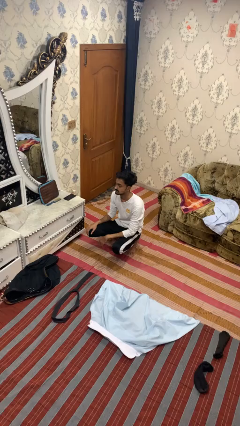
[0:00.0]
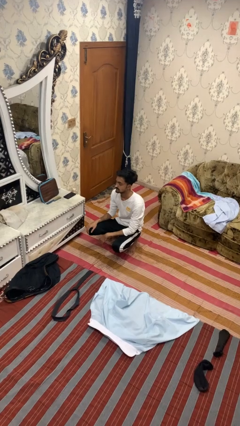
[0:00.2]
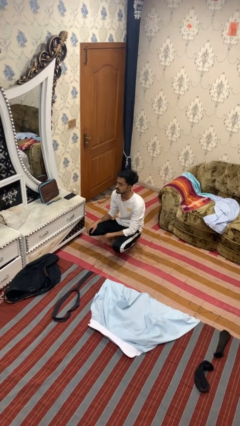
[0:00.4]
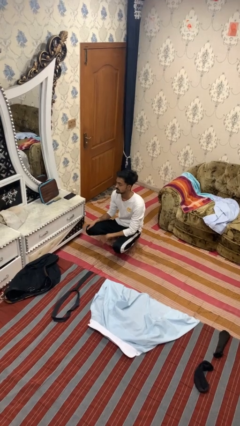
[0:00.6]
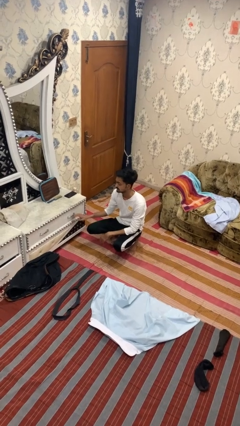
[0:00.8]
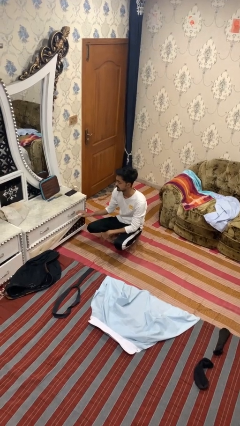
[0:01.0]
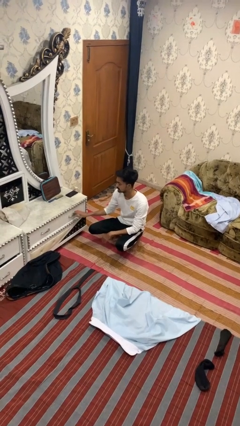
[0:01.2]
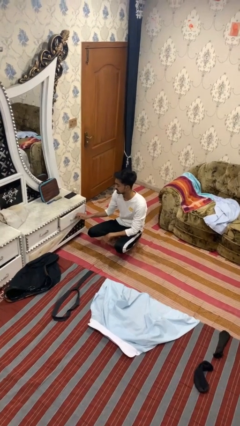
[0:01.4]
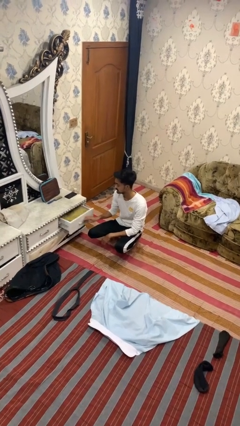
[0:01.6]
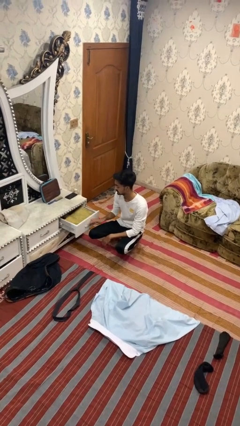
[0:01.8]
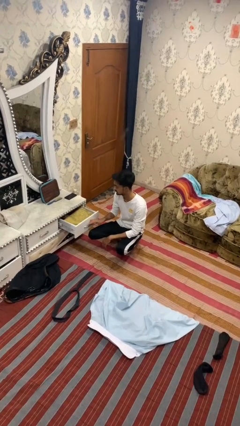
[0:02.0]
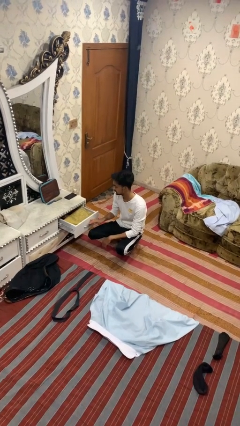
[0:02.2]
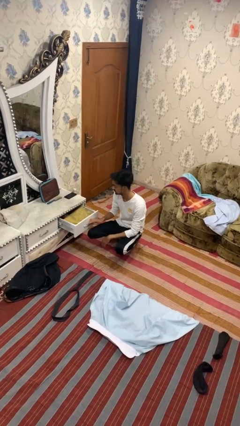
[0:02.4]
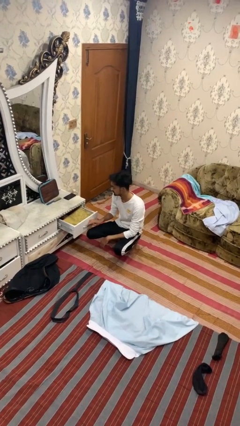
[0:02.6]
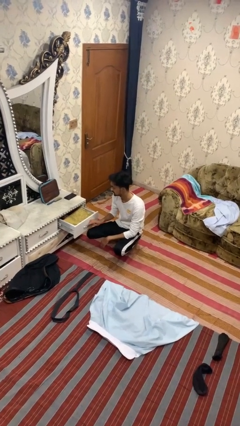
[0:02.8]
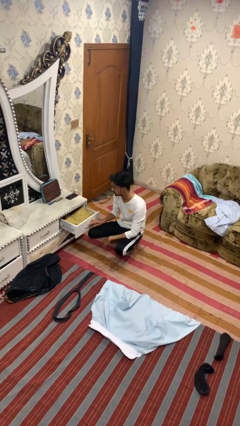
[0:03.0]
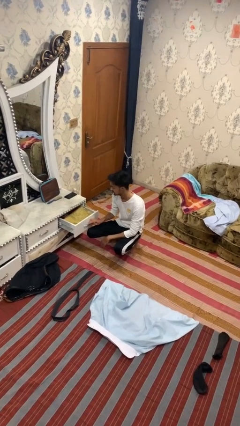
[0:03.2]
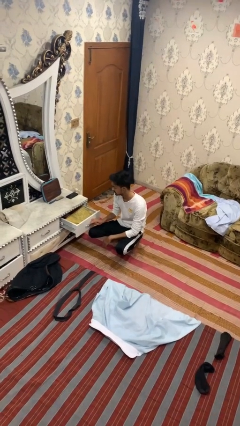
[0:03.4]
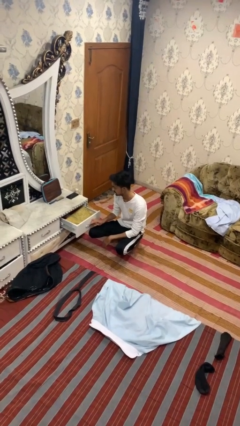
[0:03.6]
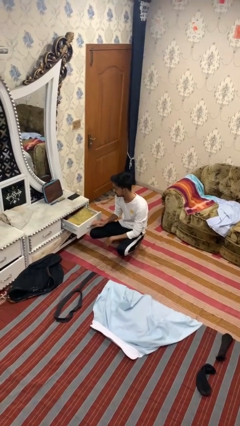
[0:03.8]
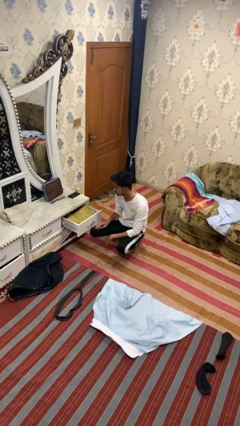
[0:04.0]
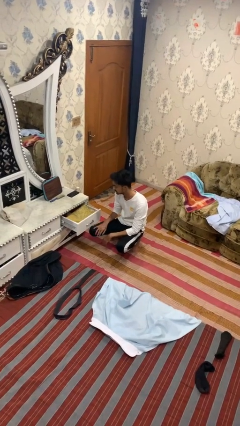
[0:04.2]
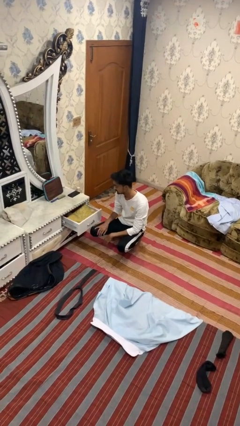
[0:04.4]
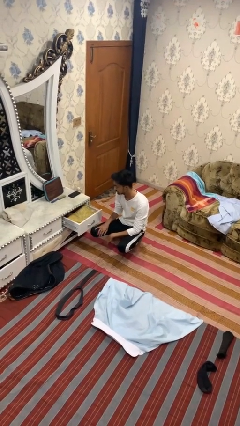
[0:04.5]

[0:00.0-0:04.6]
person opens dresser drawer

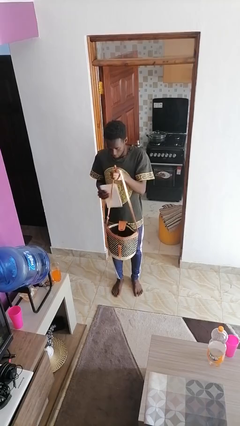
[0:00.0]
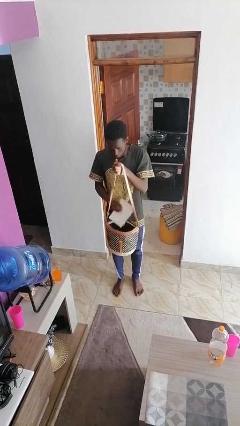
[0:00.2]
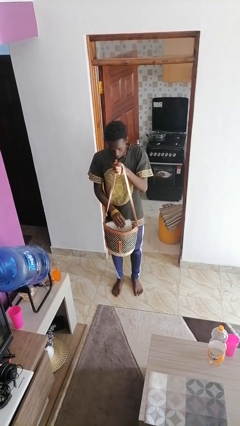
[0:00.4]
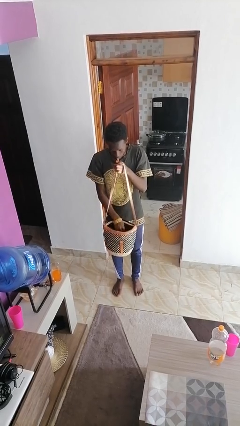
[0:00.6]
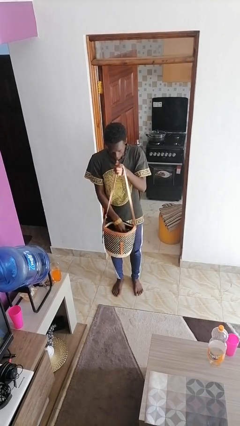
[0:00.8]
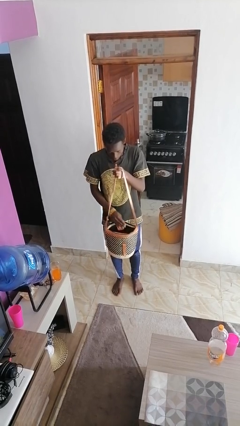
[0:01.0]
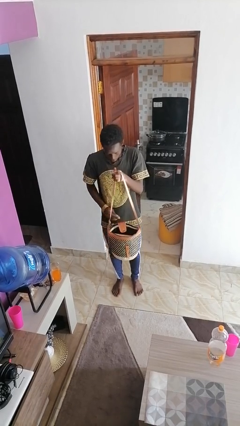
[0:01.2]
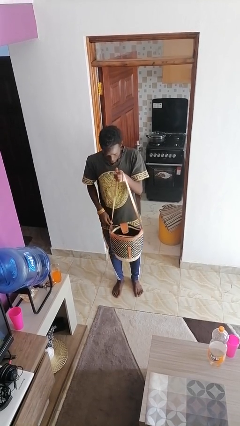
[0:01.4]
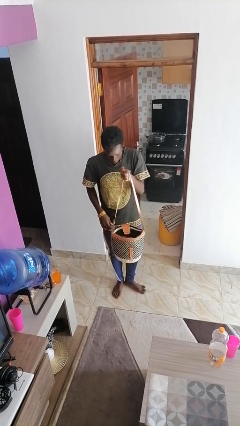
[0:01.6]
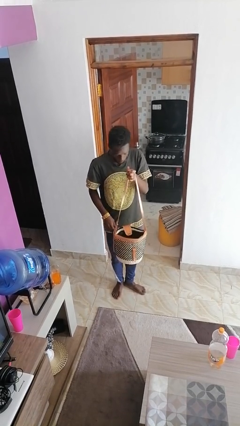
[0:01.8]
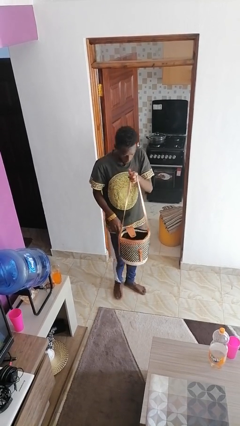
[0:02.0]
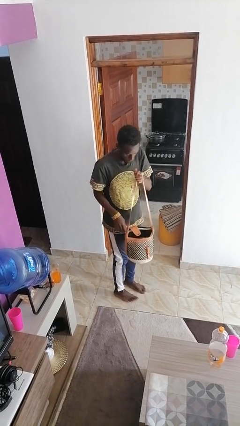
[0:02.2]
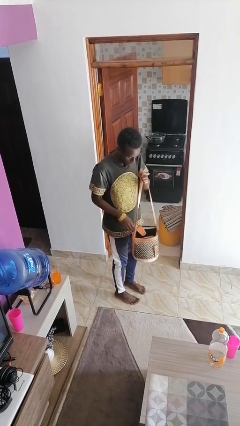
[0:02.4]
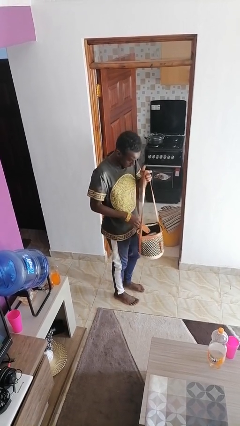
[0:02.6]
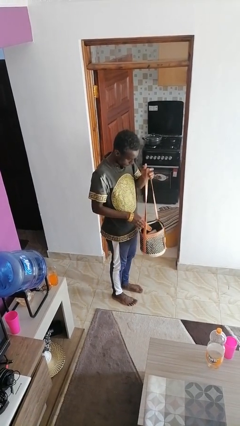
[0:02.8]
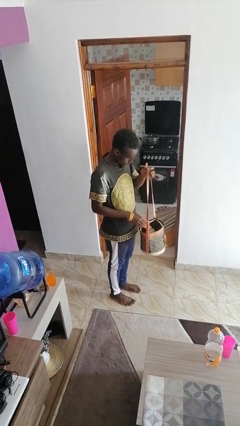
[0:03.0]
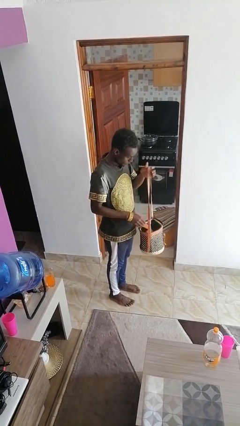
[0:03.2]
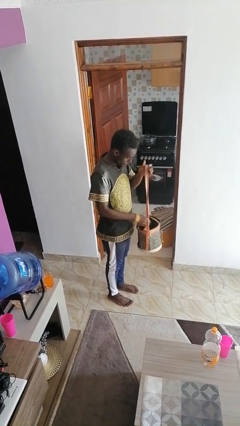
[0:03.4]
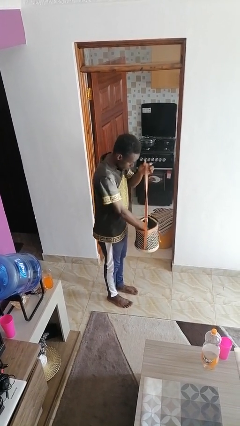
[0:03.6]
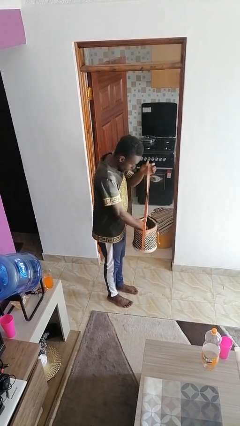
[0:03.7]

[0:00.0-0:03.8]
person puts object into purse

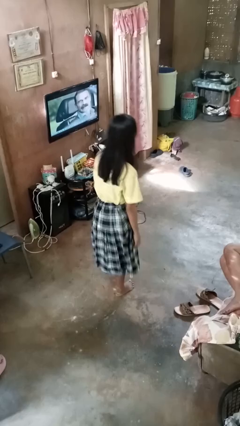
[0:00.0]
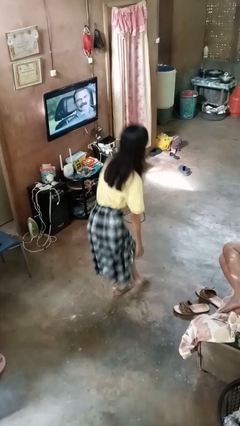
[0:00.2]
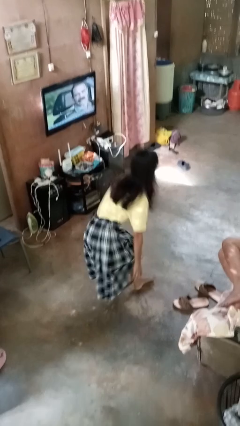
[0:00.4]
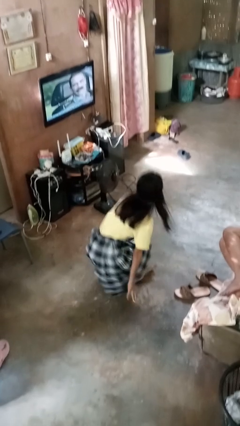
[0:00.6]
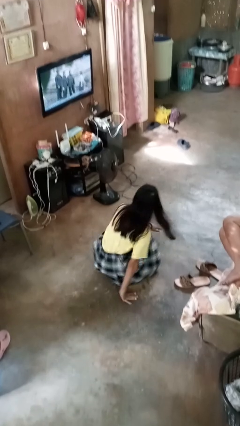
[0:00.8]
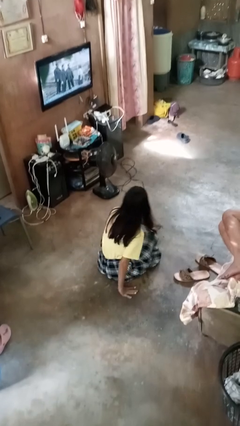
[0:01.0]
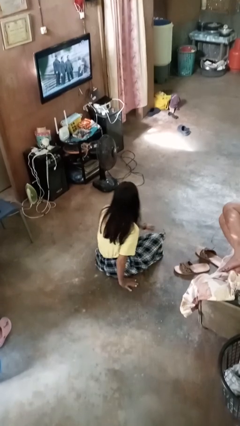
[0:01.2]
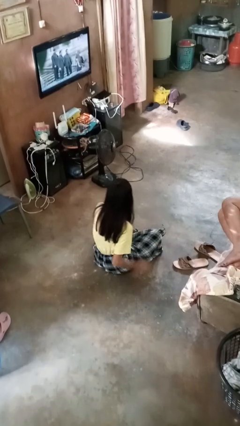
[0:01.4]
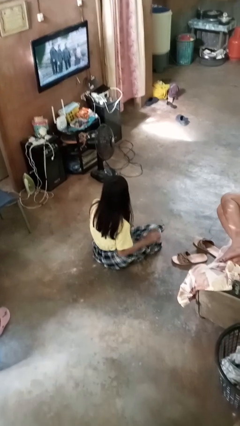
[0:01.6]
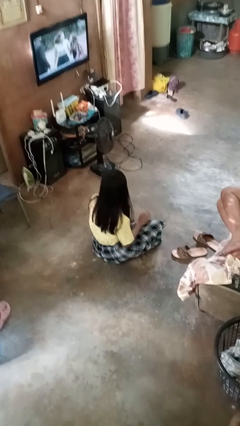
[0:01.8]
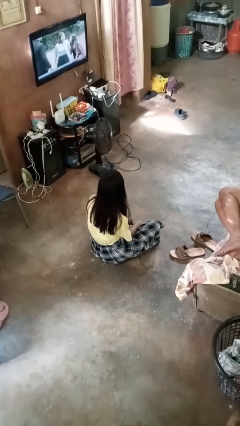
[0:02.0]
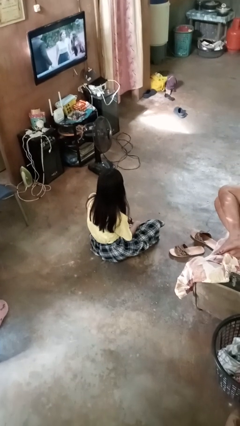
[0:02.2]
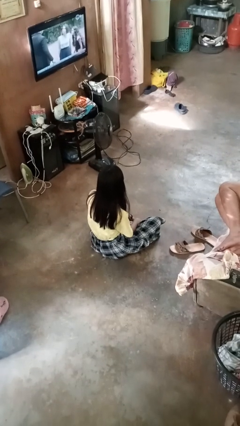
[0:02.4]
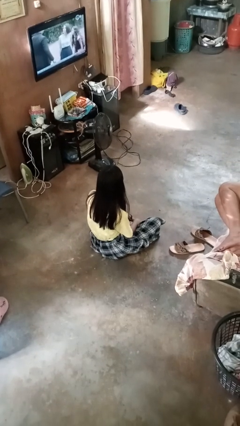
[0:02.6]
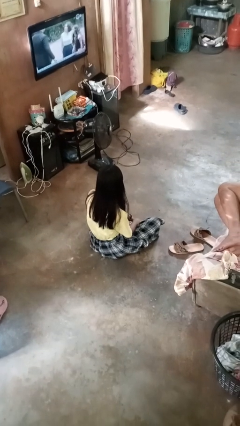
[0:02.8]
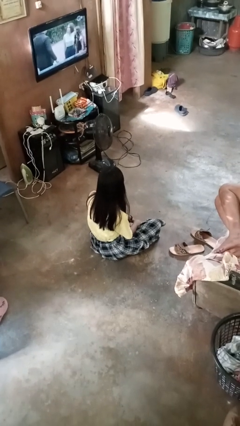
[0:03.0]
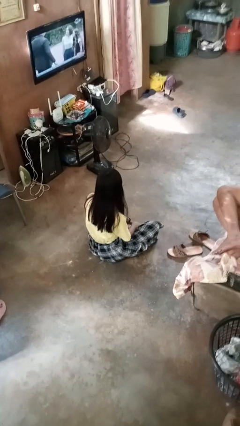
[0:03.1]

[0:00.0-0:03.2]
person sits crisscross

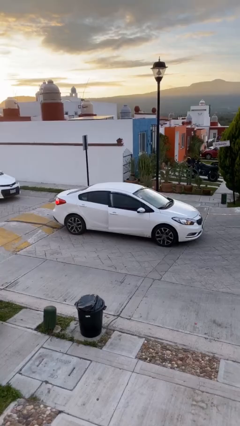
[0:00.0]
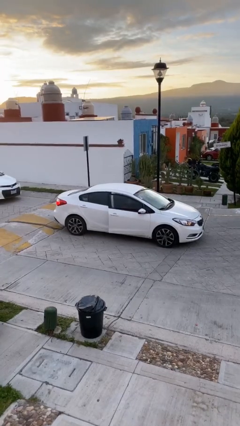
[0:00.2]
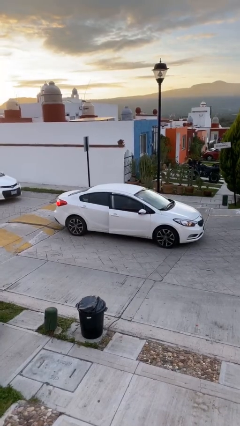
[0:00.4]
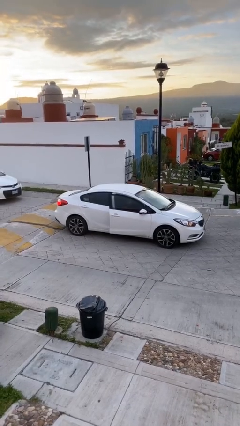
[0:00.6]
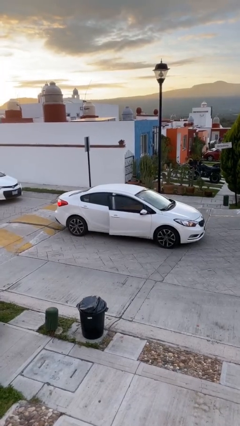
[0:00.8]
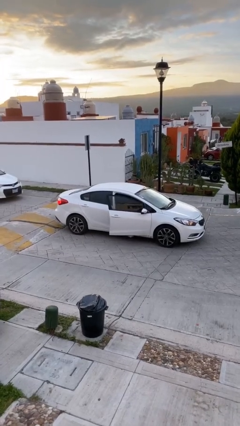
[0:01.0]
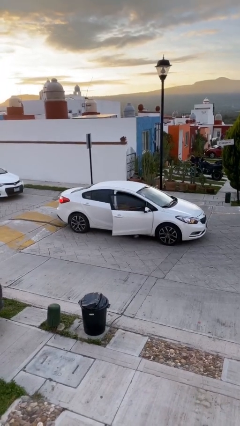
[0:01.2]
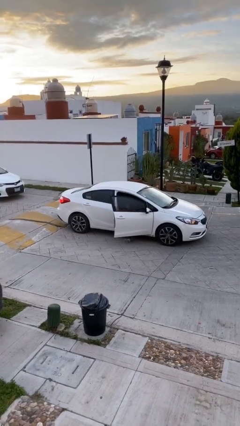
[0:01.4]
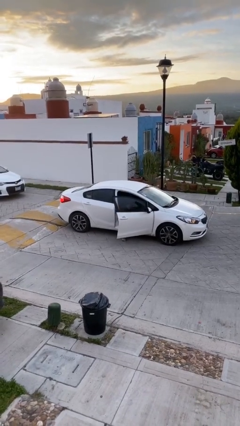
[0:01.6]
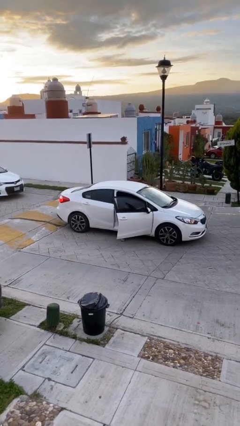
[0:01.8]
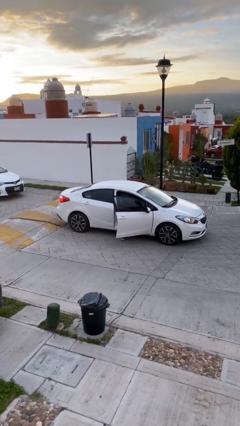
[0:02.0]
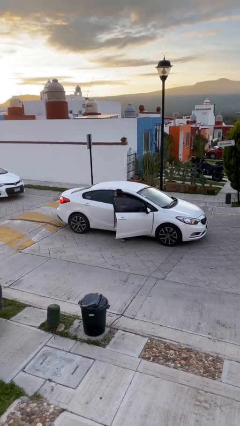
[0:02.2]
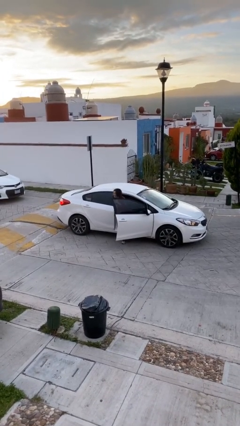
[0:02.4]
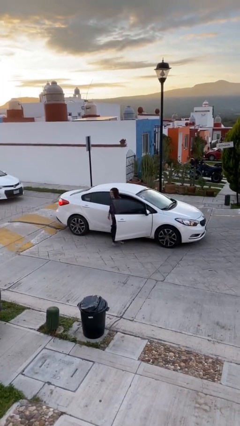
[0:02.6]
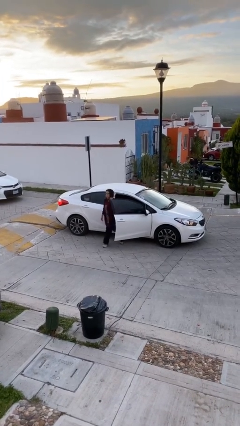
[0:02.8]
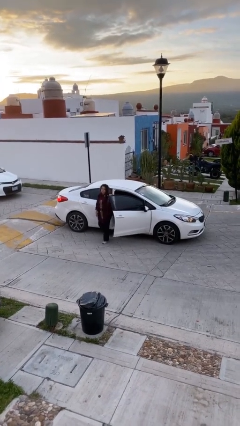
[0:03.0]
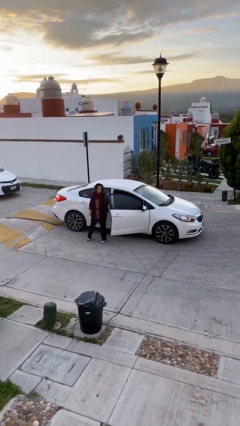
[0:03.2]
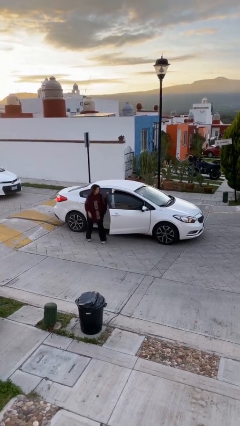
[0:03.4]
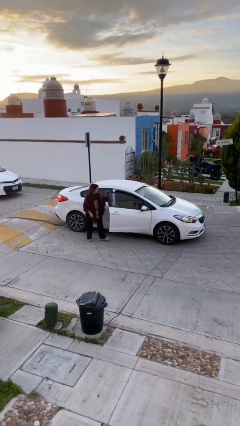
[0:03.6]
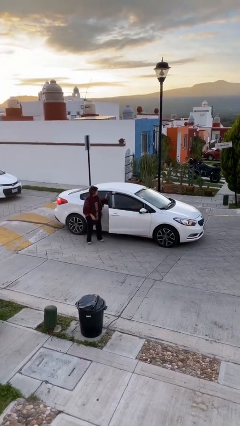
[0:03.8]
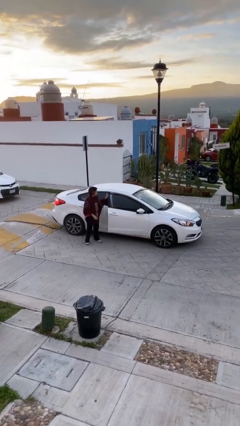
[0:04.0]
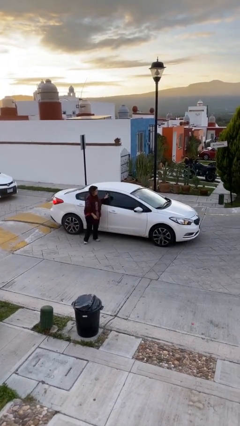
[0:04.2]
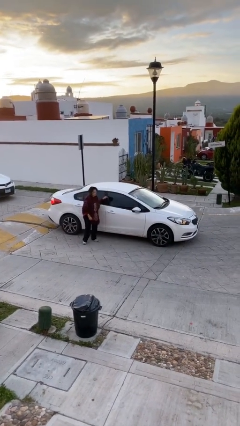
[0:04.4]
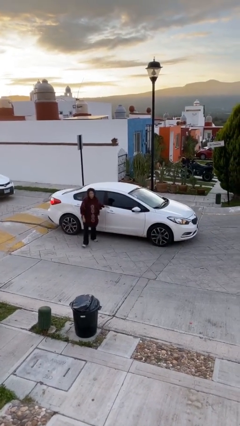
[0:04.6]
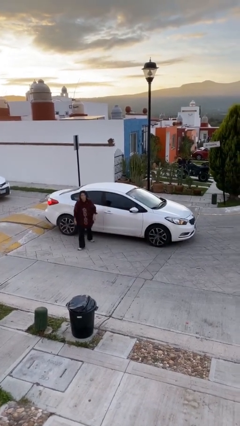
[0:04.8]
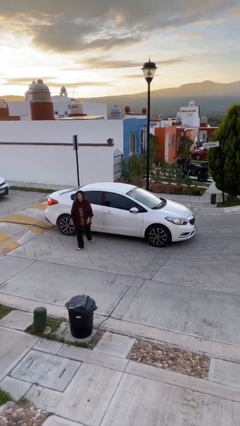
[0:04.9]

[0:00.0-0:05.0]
car drops off person

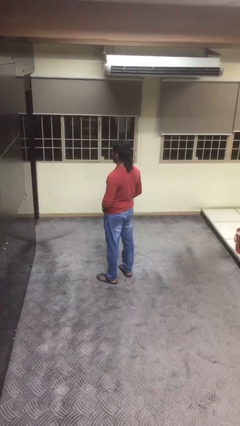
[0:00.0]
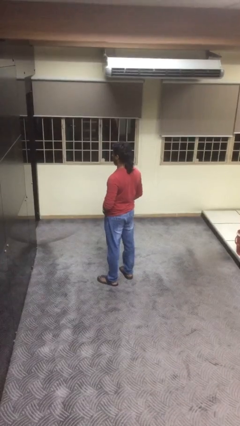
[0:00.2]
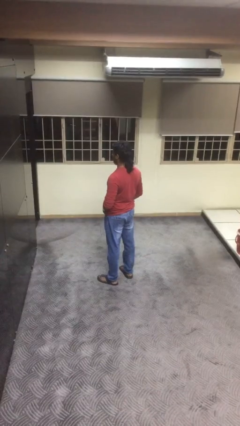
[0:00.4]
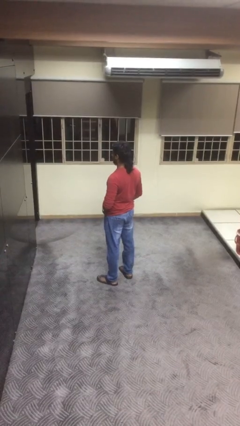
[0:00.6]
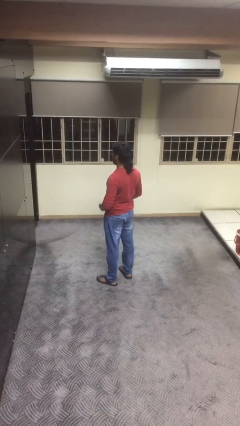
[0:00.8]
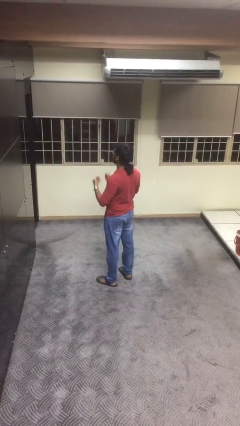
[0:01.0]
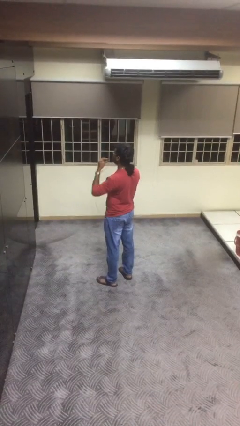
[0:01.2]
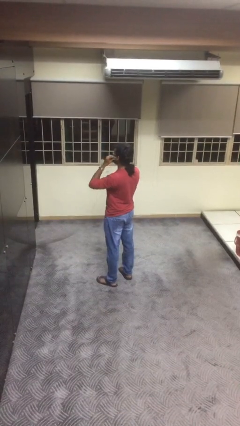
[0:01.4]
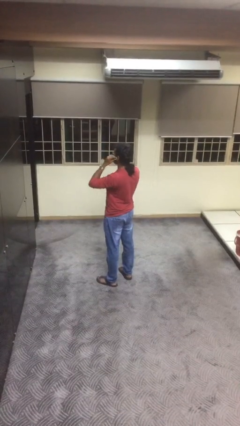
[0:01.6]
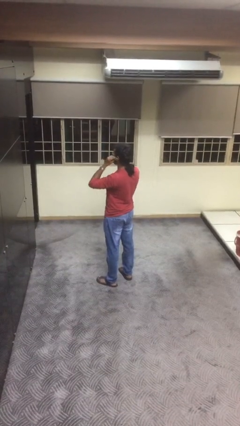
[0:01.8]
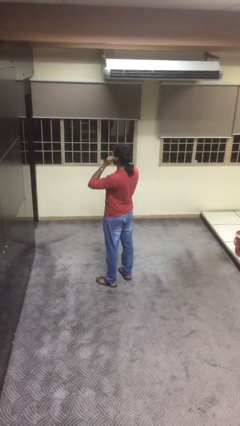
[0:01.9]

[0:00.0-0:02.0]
person puts on headphones
